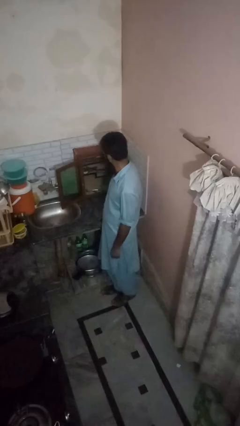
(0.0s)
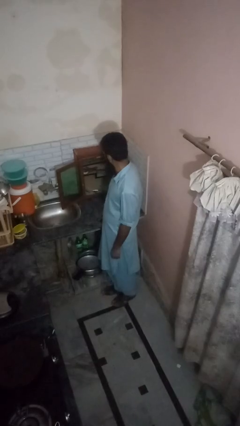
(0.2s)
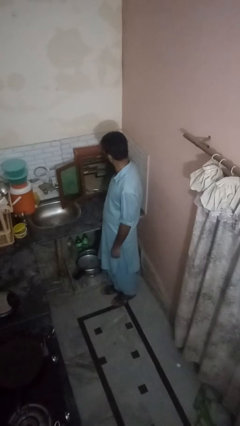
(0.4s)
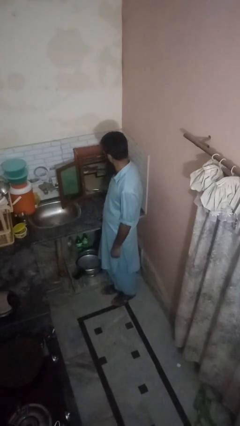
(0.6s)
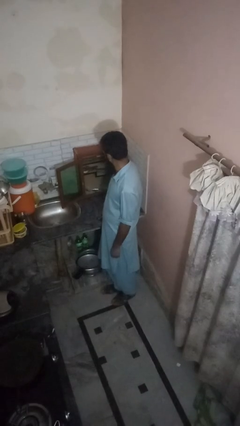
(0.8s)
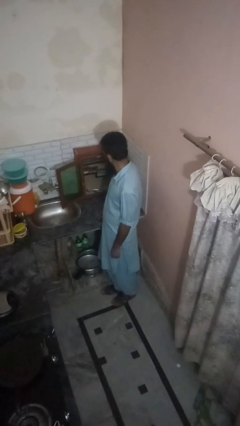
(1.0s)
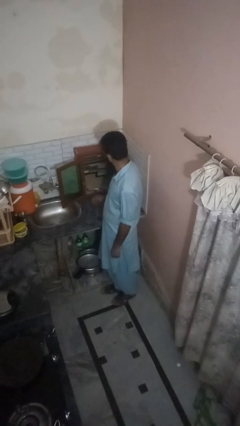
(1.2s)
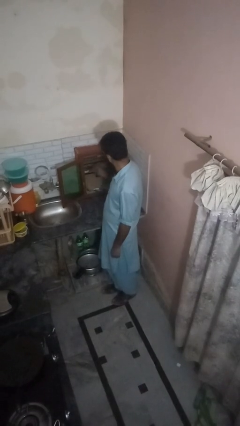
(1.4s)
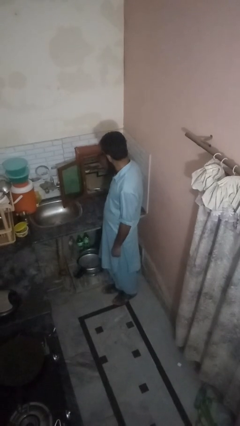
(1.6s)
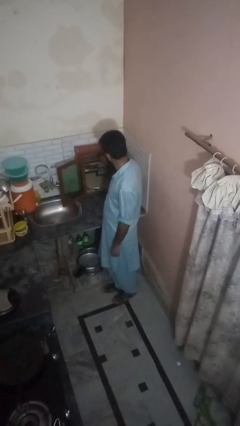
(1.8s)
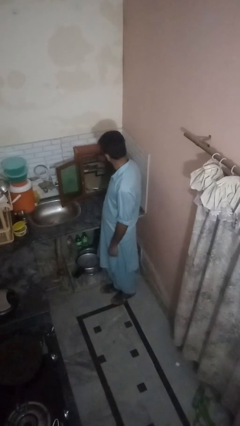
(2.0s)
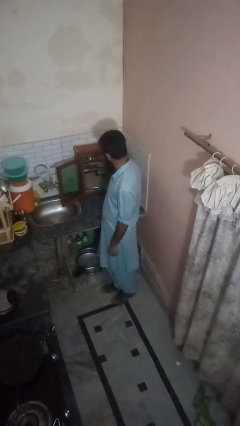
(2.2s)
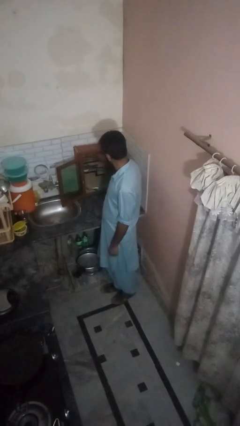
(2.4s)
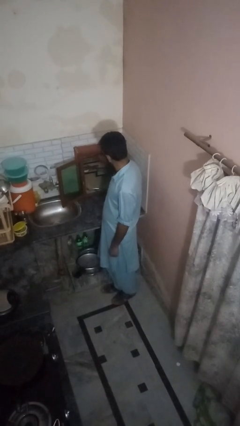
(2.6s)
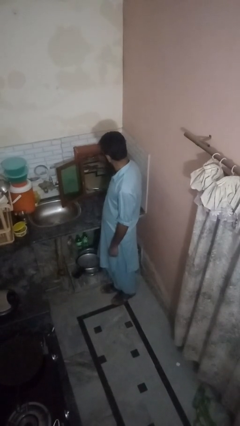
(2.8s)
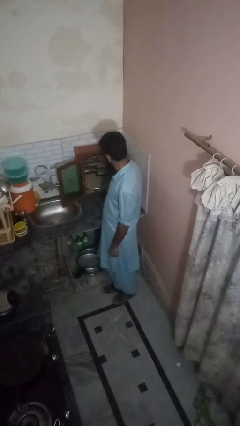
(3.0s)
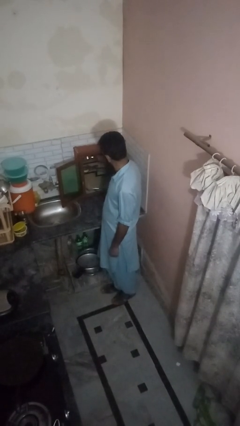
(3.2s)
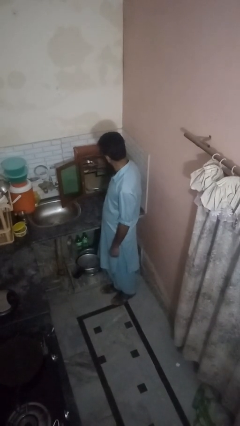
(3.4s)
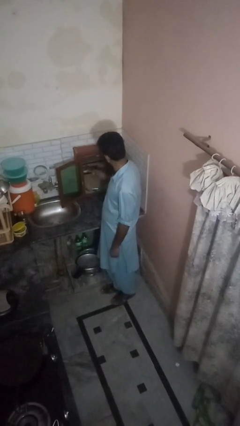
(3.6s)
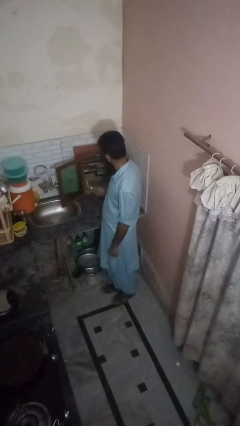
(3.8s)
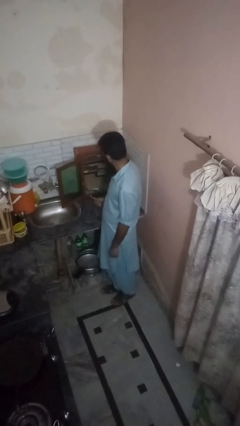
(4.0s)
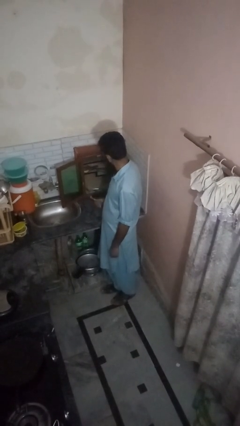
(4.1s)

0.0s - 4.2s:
person takes object from kitchen drawer

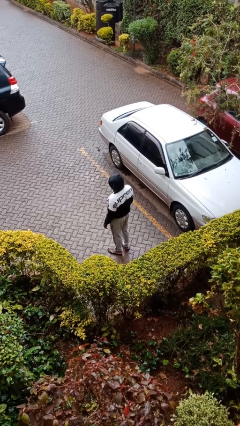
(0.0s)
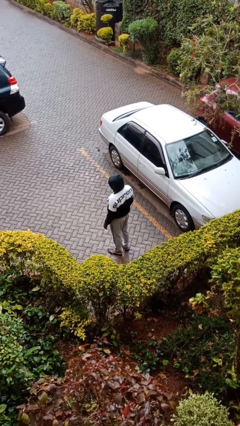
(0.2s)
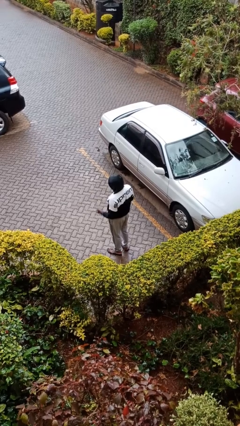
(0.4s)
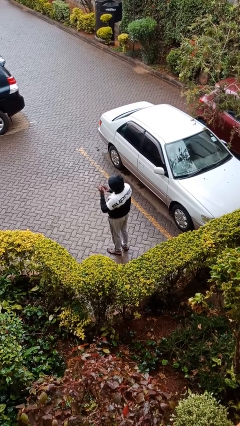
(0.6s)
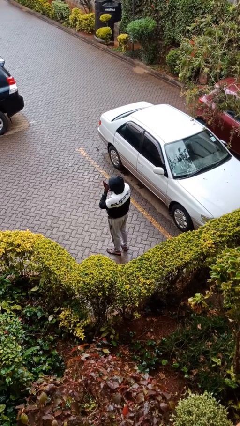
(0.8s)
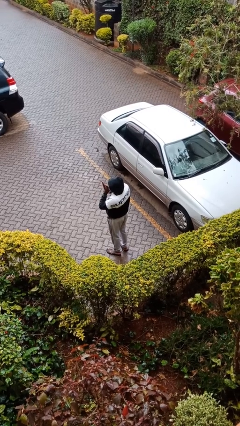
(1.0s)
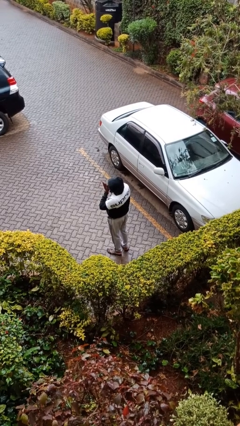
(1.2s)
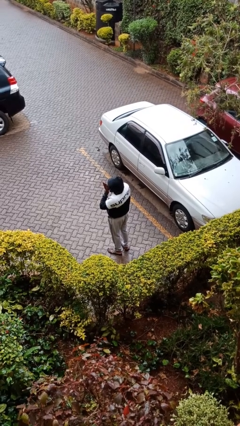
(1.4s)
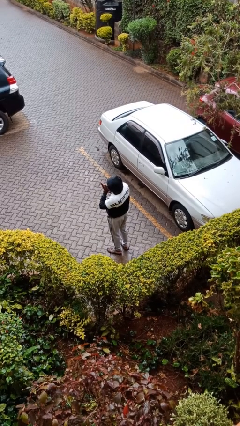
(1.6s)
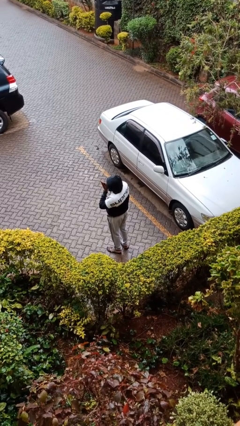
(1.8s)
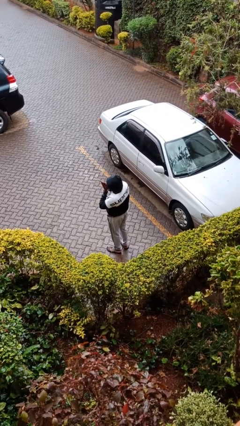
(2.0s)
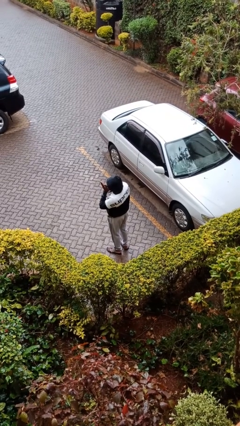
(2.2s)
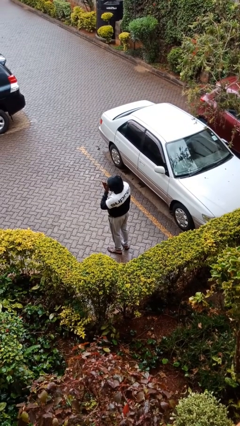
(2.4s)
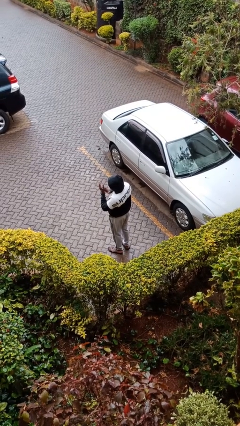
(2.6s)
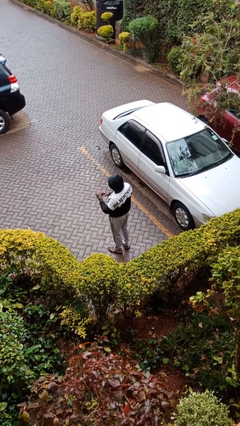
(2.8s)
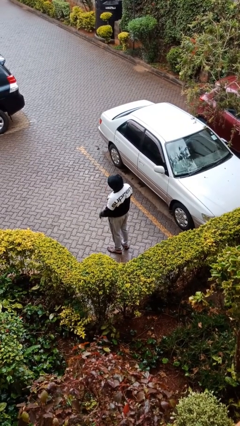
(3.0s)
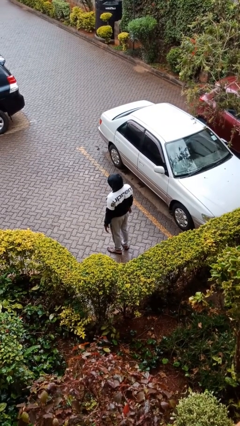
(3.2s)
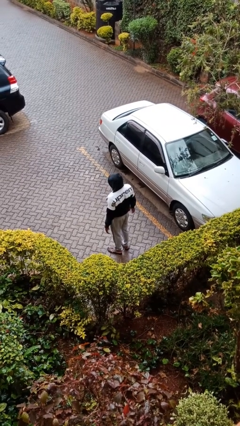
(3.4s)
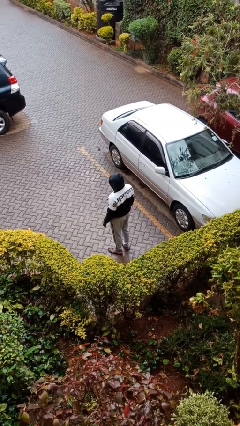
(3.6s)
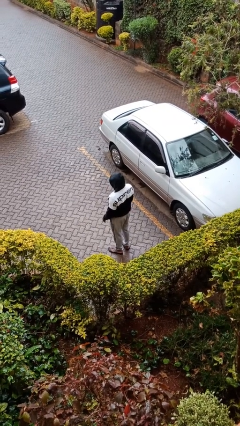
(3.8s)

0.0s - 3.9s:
person blows into hands

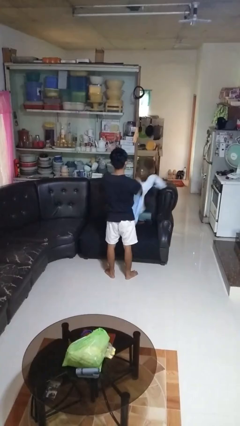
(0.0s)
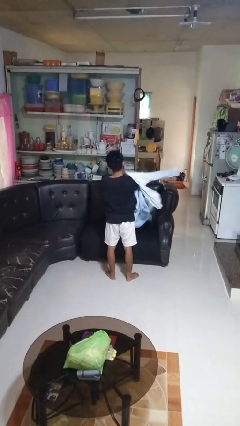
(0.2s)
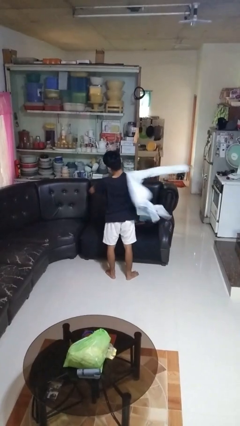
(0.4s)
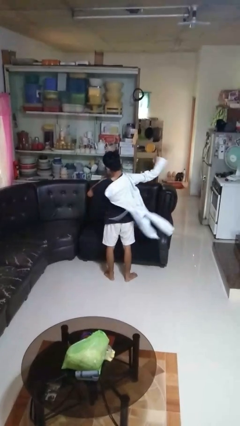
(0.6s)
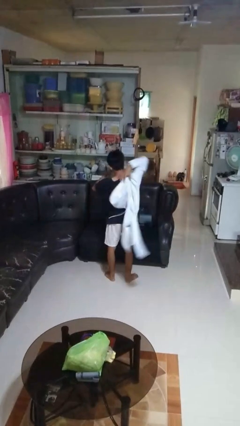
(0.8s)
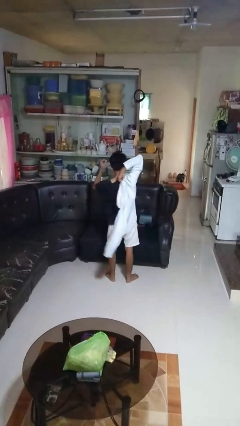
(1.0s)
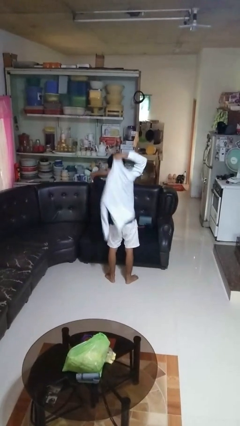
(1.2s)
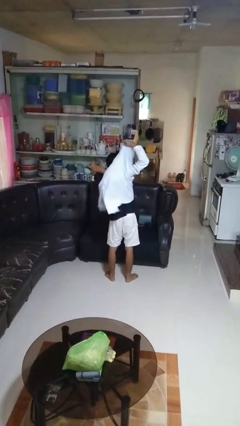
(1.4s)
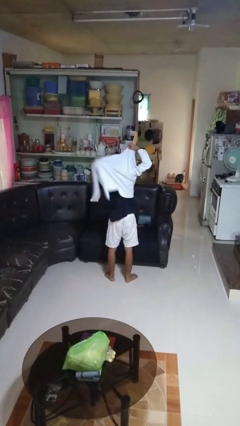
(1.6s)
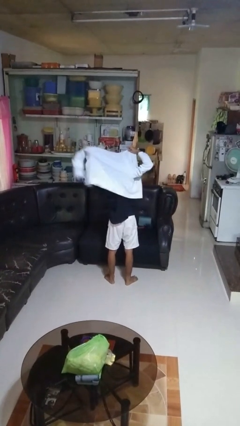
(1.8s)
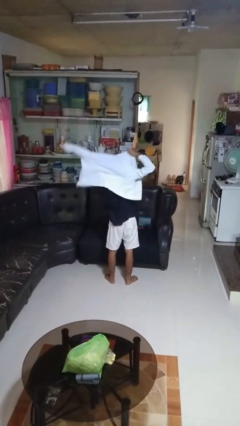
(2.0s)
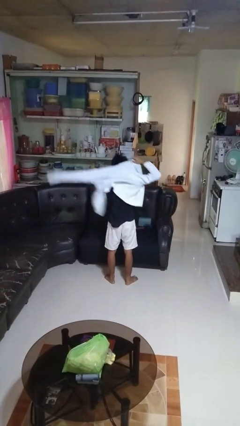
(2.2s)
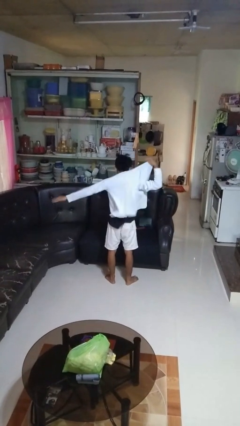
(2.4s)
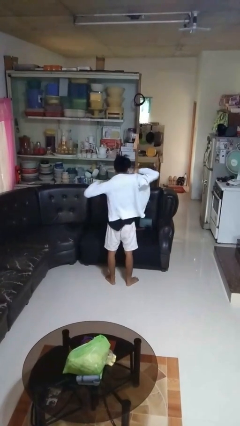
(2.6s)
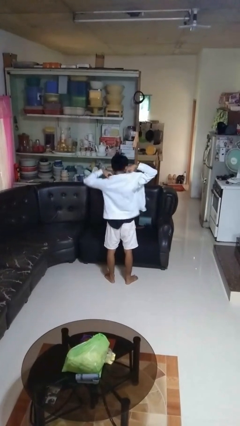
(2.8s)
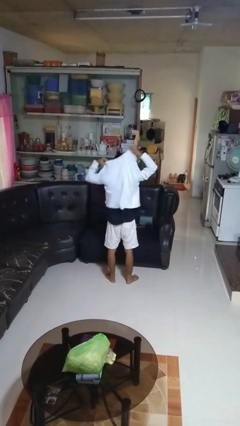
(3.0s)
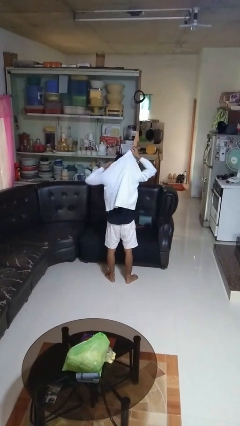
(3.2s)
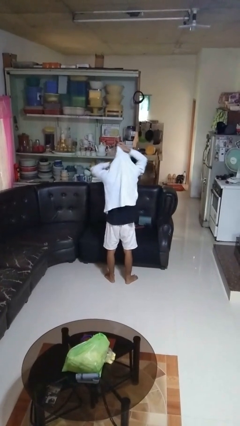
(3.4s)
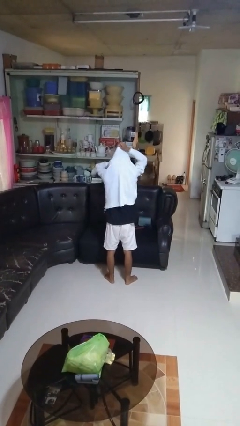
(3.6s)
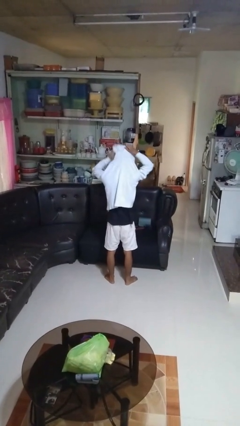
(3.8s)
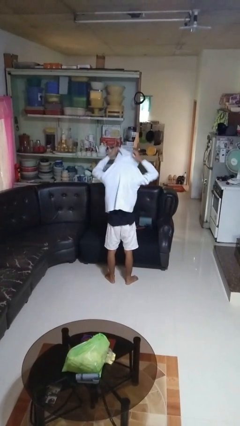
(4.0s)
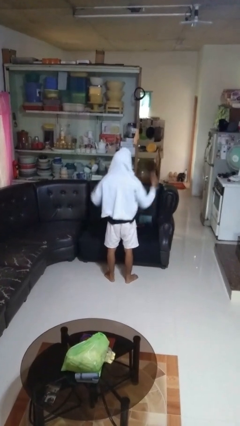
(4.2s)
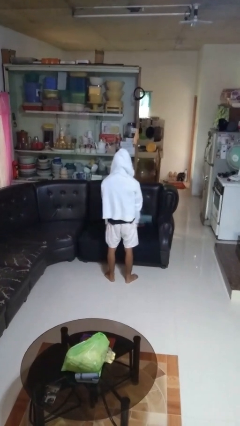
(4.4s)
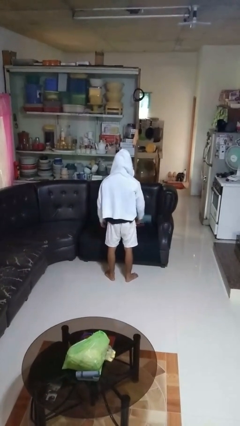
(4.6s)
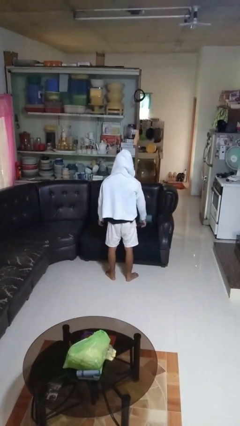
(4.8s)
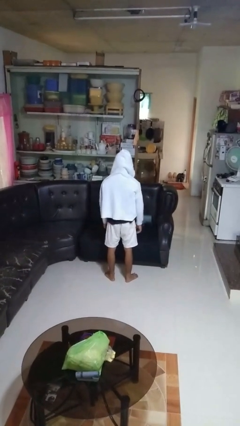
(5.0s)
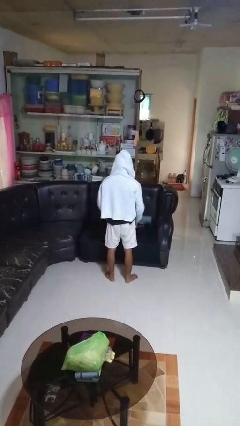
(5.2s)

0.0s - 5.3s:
person puts on hoodie

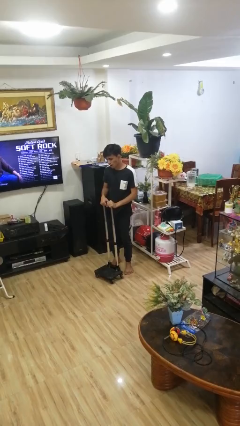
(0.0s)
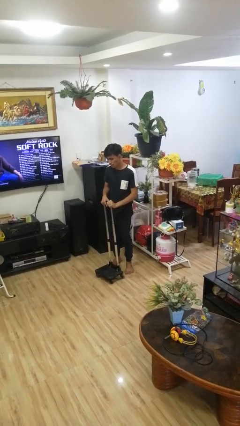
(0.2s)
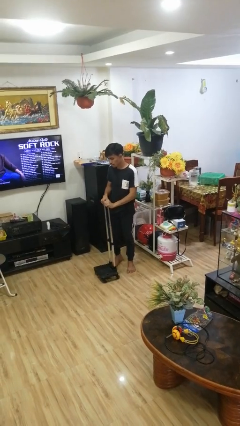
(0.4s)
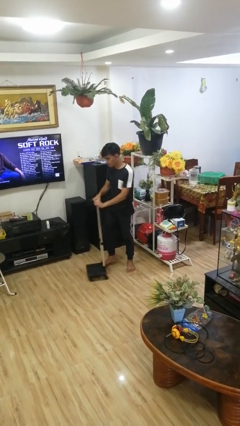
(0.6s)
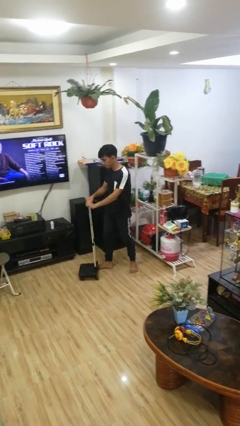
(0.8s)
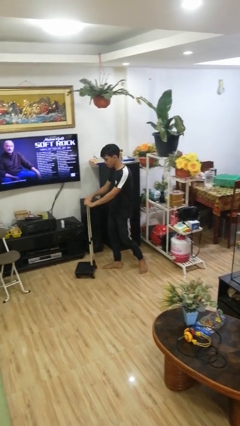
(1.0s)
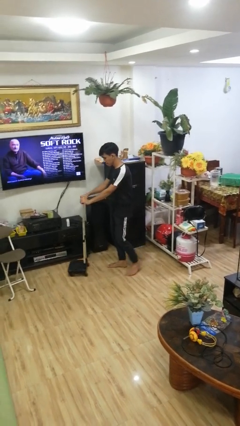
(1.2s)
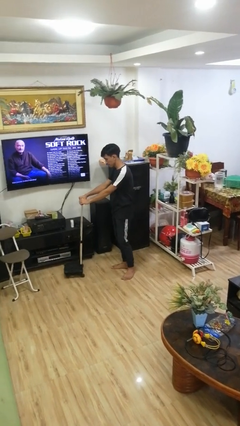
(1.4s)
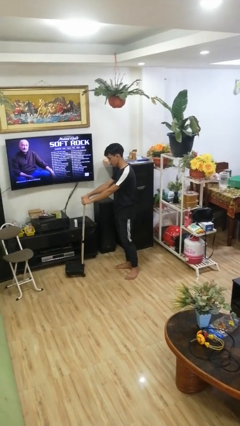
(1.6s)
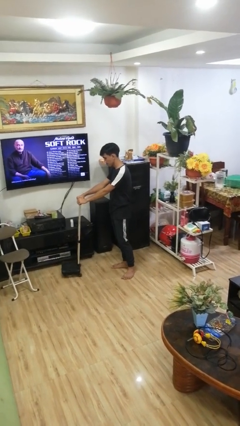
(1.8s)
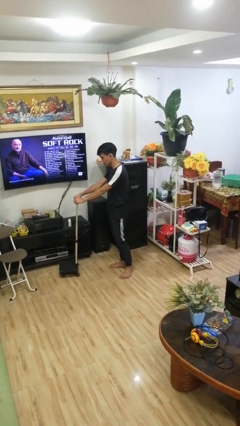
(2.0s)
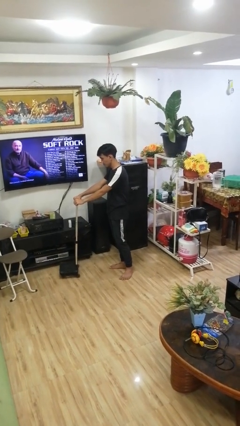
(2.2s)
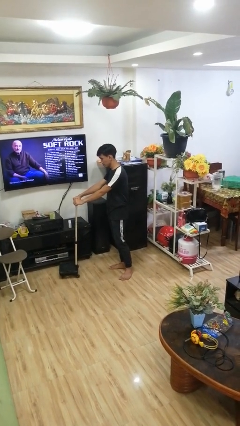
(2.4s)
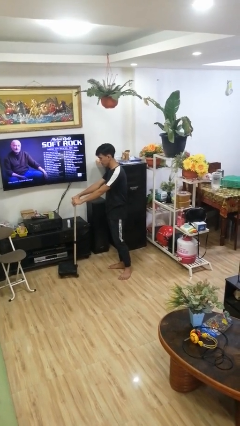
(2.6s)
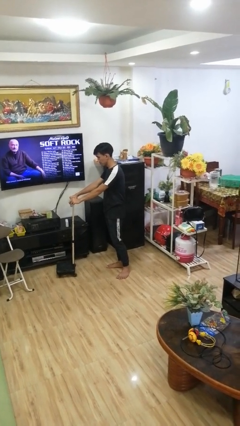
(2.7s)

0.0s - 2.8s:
person pushes wheeled cart

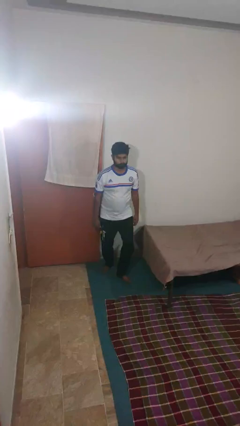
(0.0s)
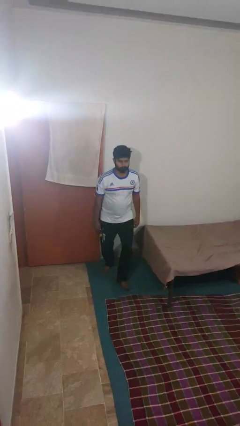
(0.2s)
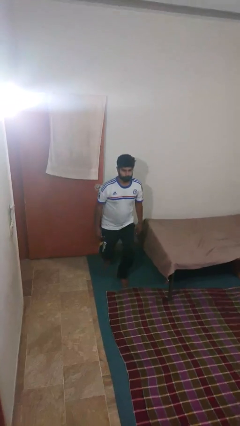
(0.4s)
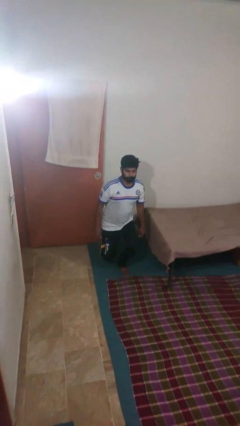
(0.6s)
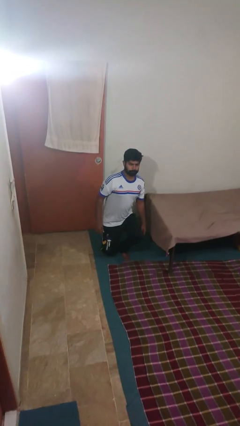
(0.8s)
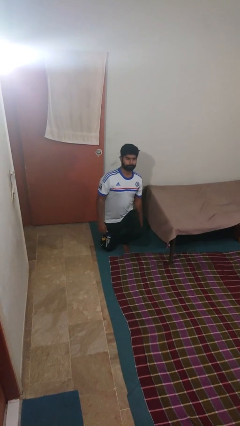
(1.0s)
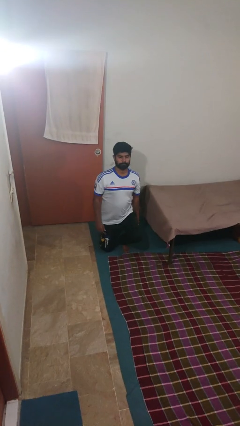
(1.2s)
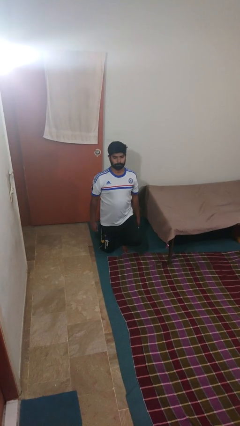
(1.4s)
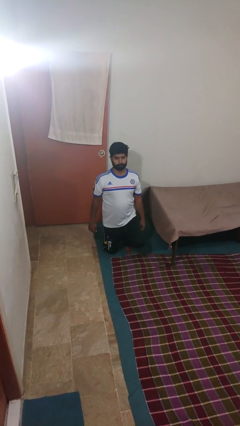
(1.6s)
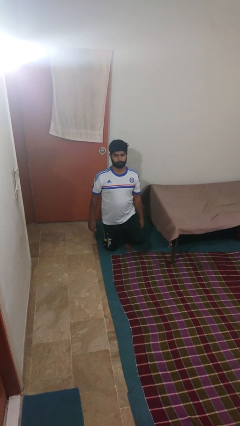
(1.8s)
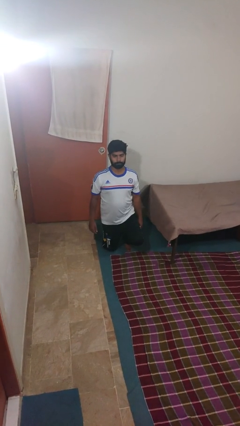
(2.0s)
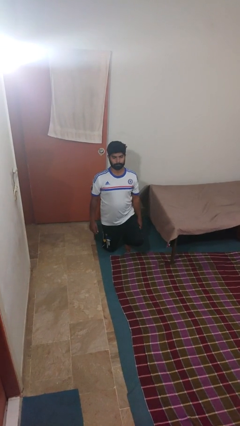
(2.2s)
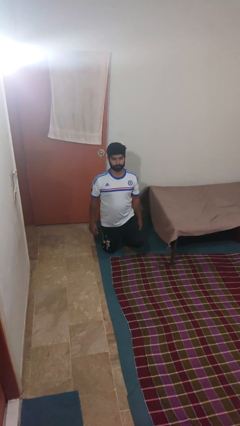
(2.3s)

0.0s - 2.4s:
person kneels
